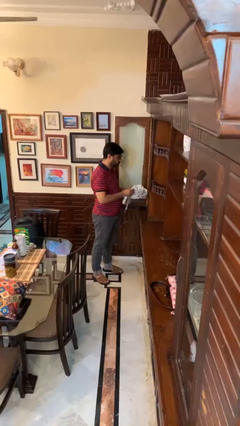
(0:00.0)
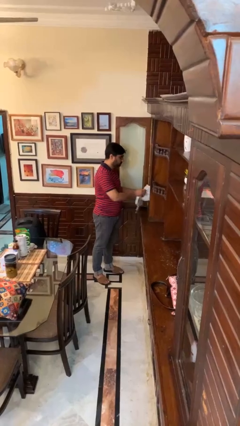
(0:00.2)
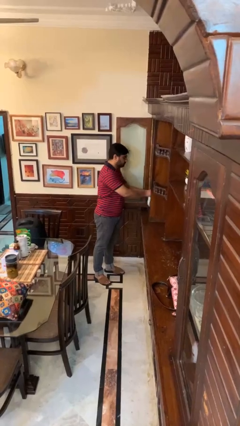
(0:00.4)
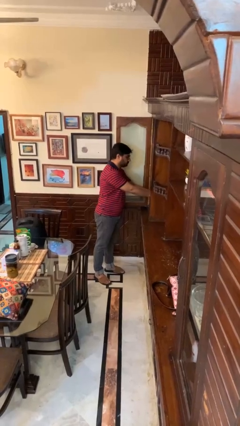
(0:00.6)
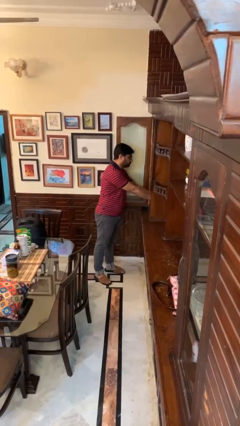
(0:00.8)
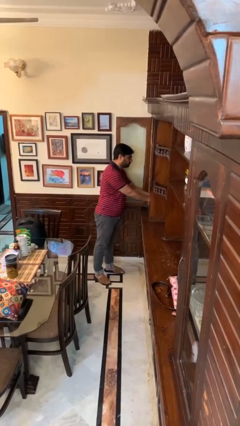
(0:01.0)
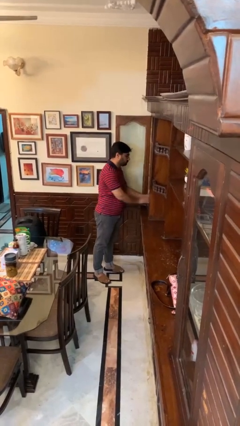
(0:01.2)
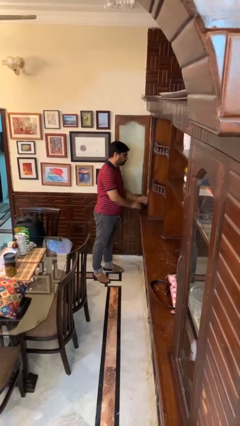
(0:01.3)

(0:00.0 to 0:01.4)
person puts clothes into dresser

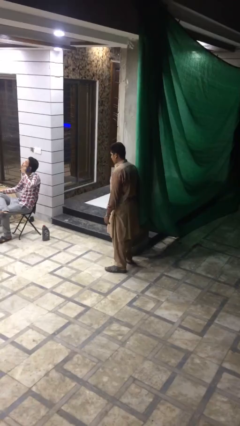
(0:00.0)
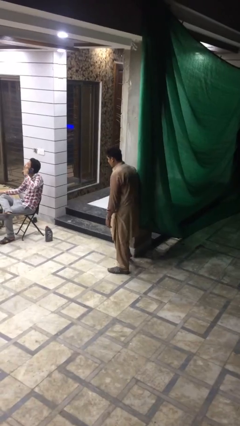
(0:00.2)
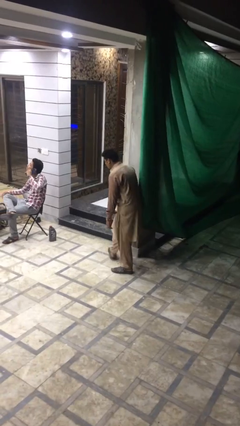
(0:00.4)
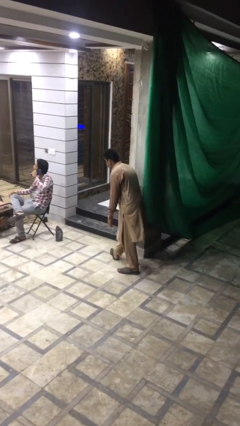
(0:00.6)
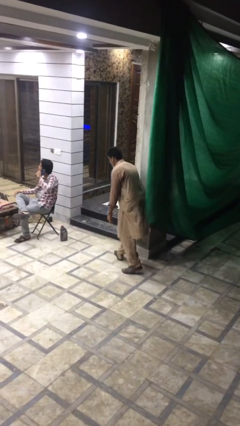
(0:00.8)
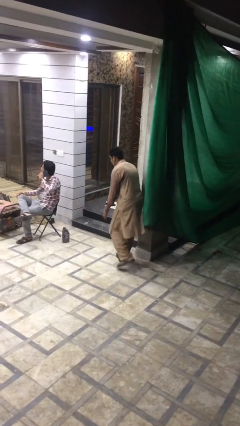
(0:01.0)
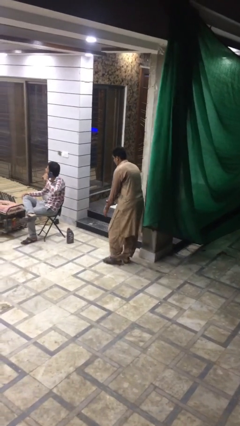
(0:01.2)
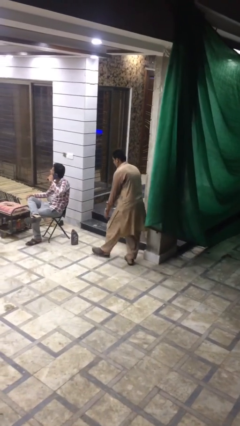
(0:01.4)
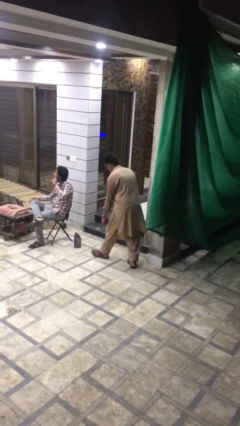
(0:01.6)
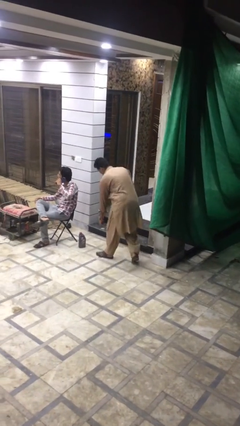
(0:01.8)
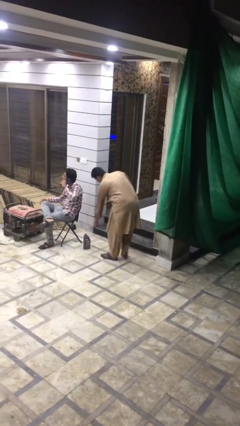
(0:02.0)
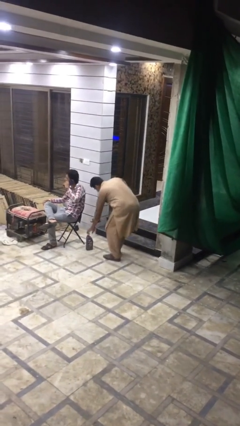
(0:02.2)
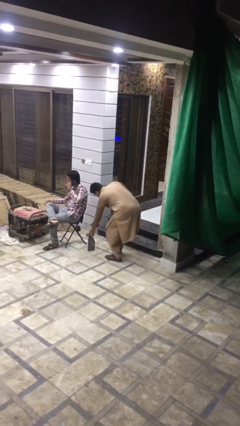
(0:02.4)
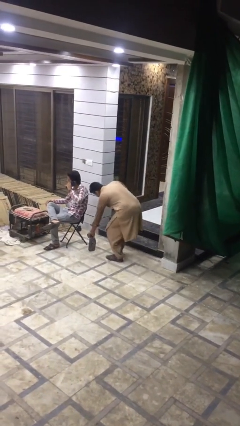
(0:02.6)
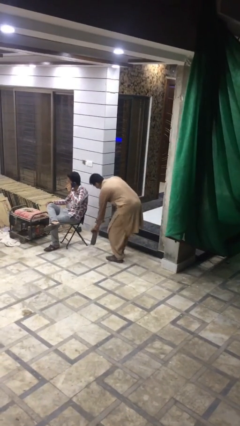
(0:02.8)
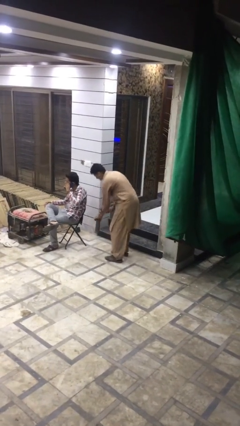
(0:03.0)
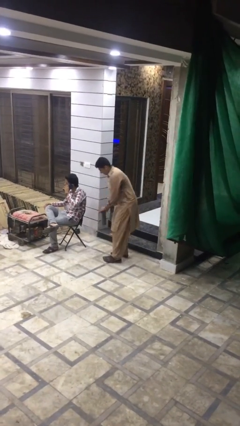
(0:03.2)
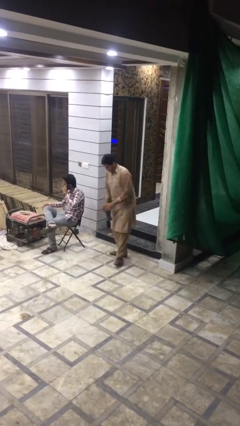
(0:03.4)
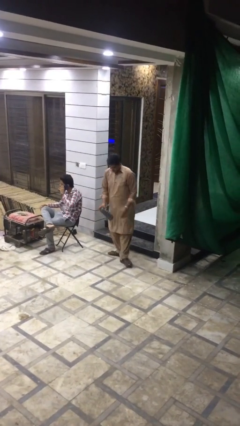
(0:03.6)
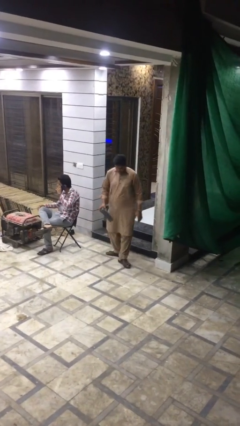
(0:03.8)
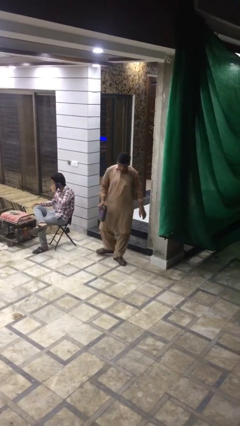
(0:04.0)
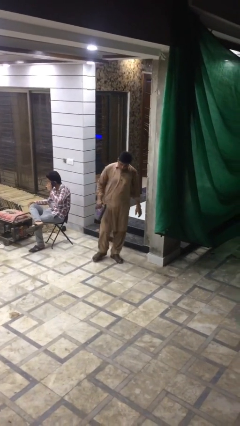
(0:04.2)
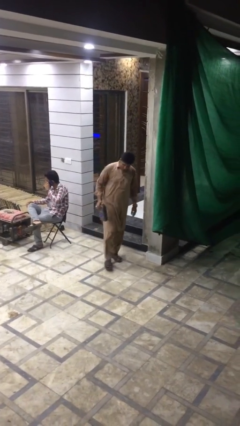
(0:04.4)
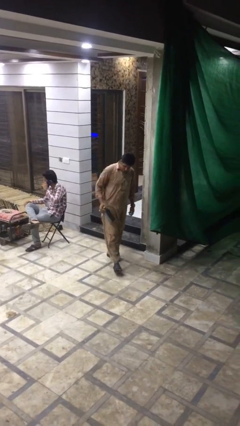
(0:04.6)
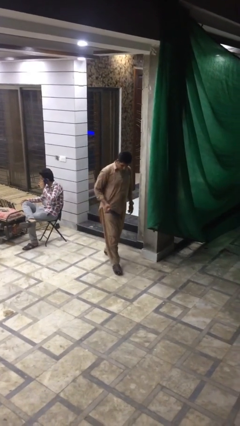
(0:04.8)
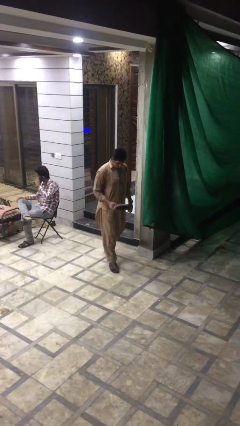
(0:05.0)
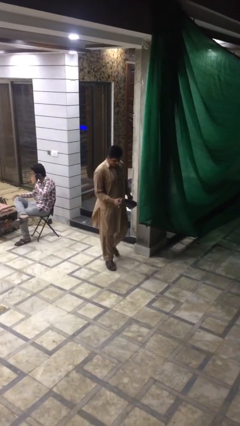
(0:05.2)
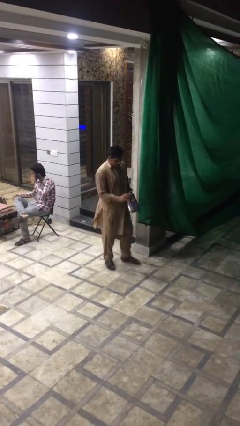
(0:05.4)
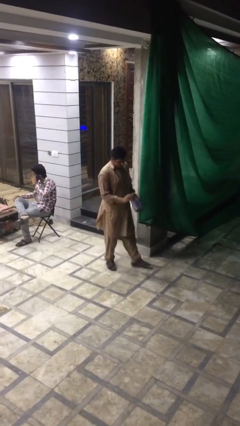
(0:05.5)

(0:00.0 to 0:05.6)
person steals object from person

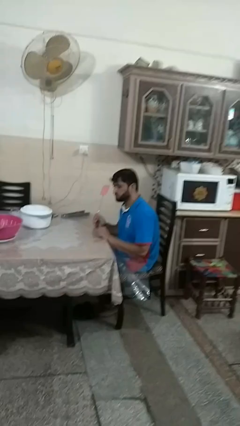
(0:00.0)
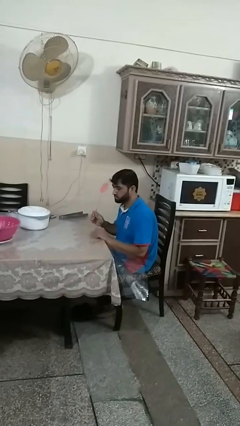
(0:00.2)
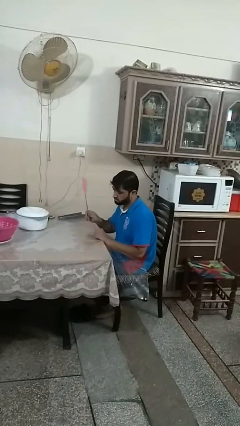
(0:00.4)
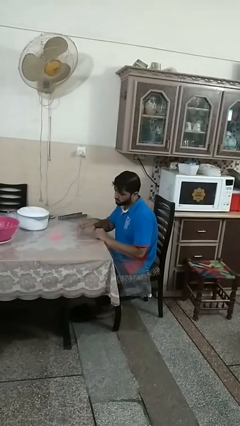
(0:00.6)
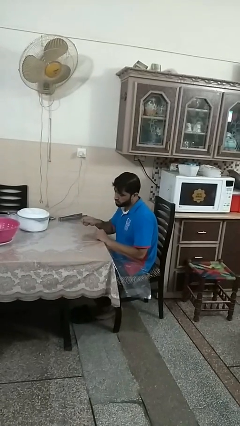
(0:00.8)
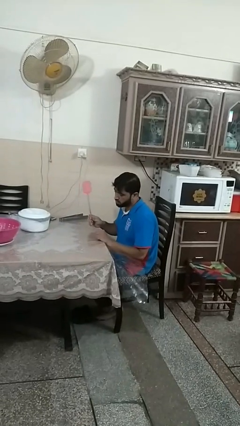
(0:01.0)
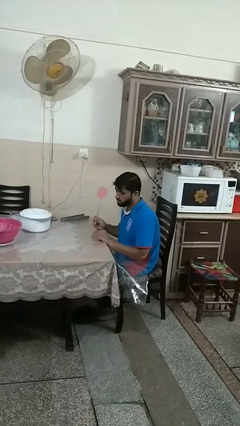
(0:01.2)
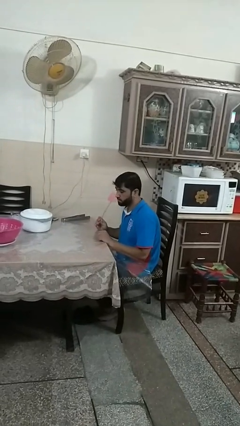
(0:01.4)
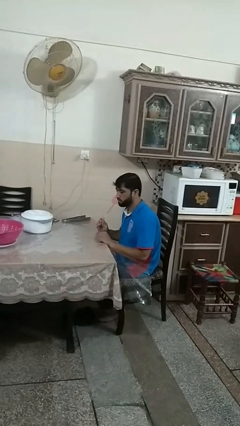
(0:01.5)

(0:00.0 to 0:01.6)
person swats bug

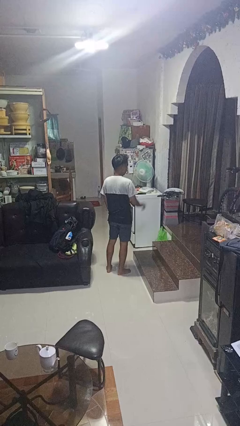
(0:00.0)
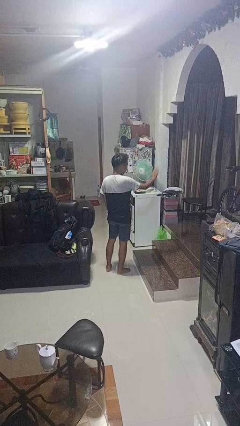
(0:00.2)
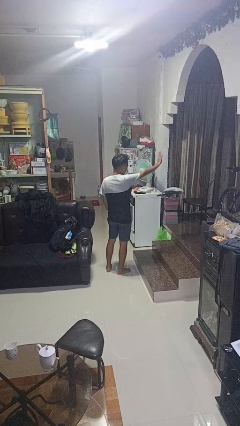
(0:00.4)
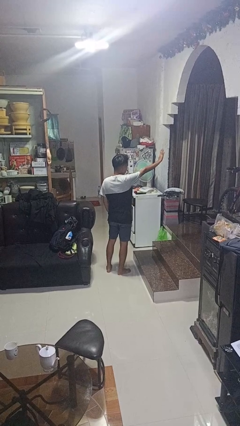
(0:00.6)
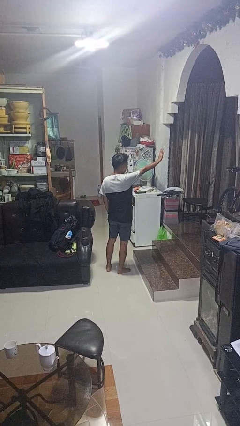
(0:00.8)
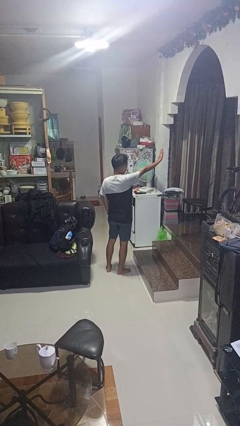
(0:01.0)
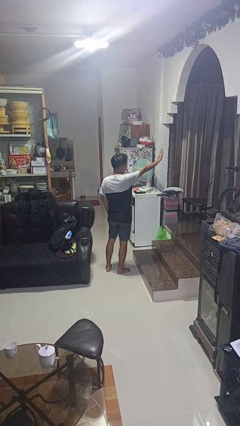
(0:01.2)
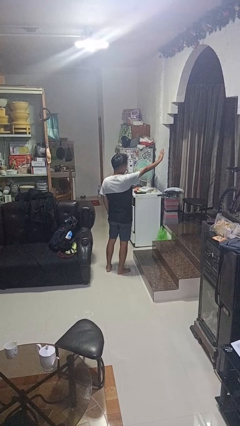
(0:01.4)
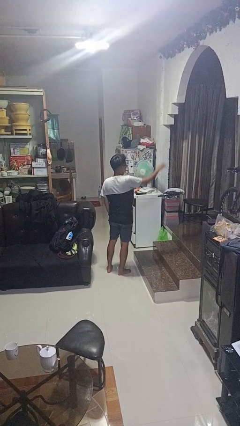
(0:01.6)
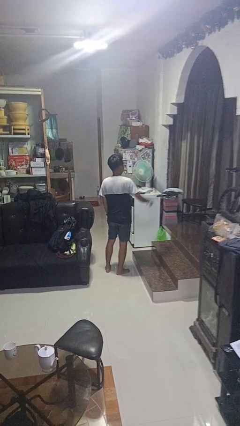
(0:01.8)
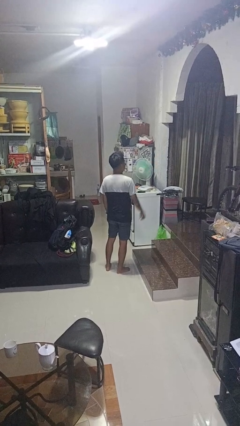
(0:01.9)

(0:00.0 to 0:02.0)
person gestures stop

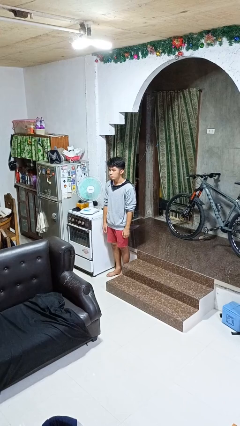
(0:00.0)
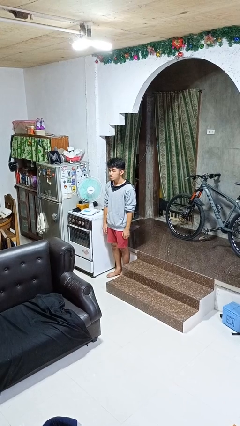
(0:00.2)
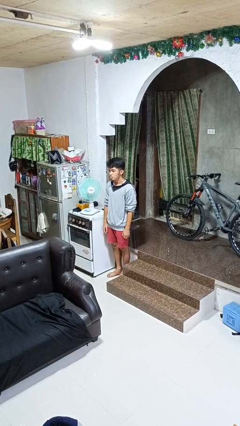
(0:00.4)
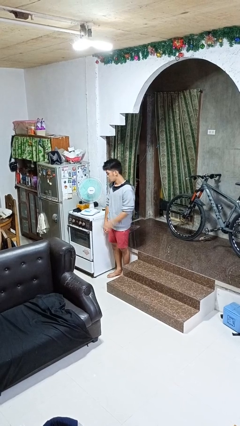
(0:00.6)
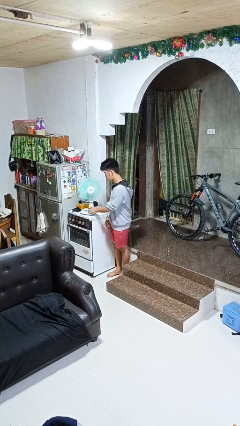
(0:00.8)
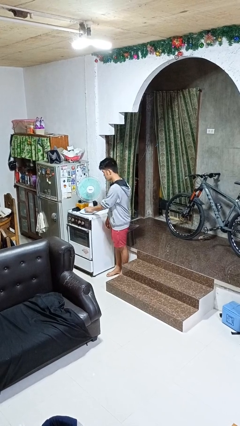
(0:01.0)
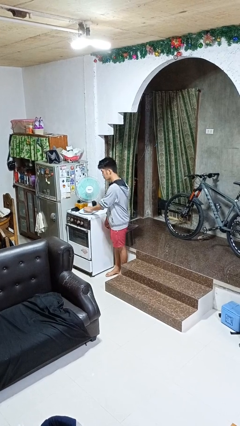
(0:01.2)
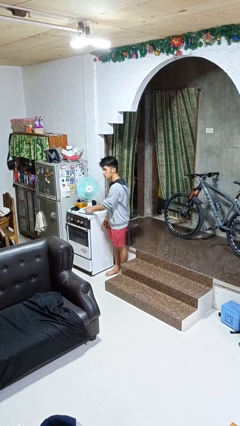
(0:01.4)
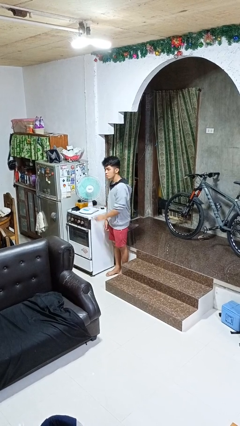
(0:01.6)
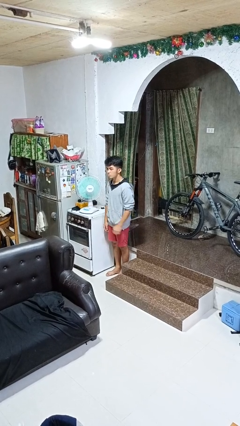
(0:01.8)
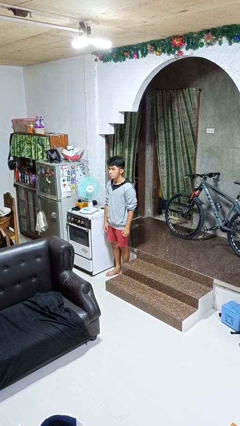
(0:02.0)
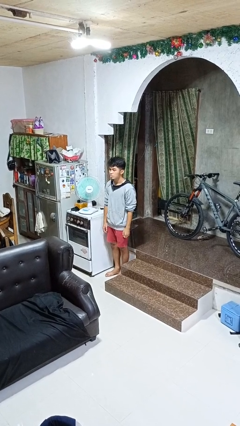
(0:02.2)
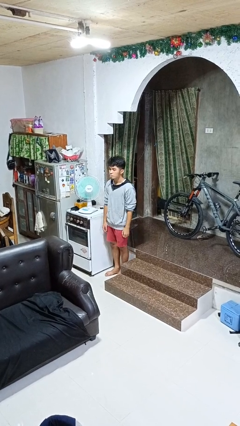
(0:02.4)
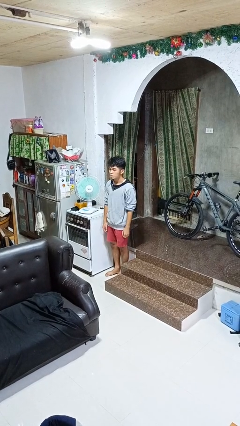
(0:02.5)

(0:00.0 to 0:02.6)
person turns on fan

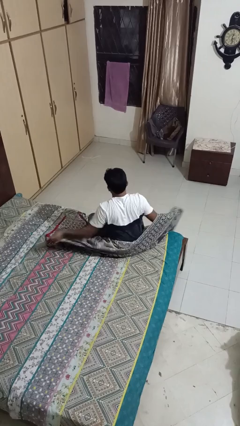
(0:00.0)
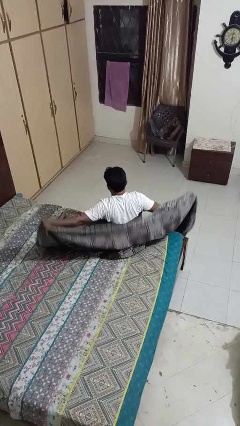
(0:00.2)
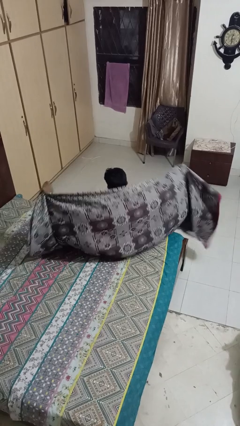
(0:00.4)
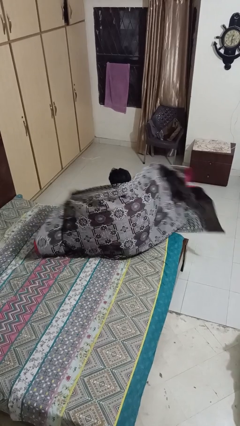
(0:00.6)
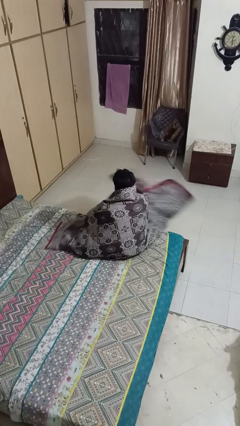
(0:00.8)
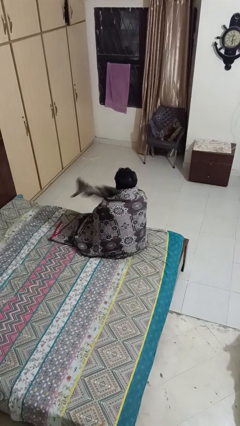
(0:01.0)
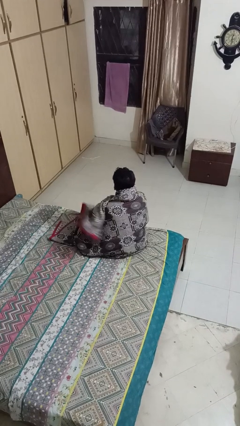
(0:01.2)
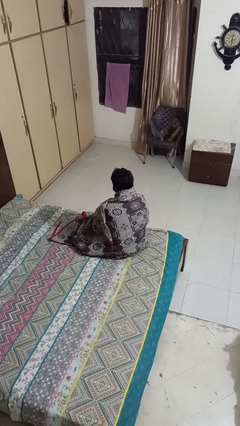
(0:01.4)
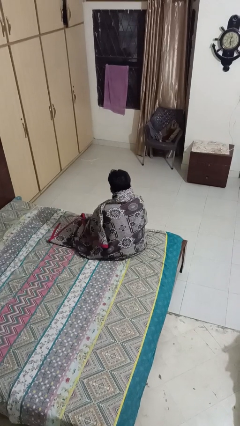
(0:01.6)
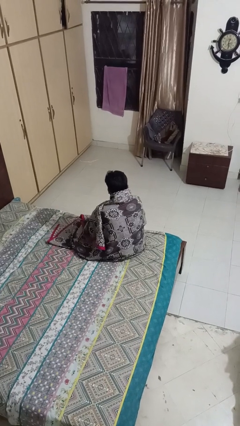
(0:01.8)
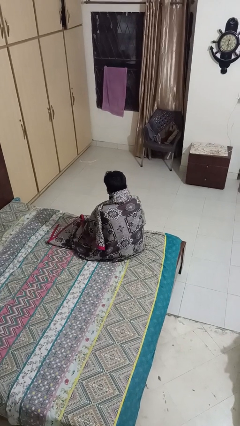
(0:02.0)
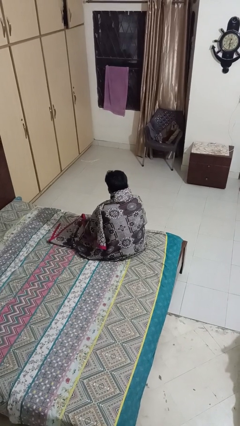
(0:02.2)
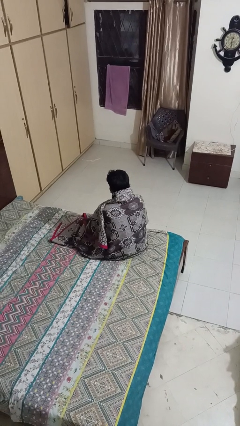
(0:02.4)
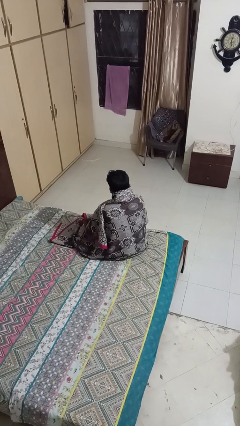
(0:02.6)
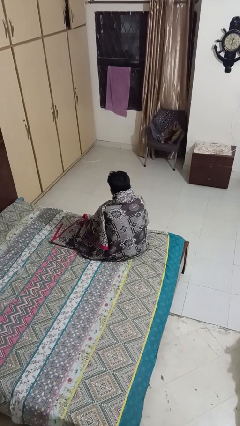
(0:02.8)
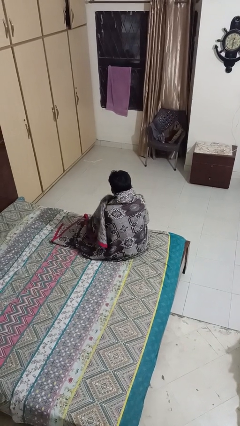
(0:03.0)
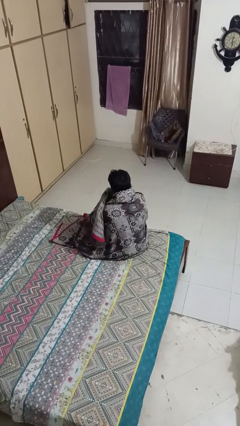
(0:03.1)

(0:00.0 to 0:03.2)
person covers with blanket

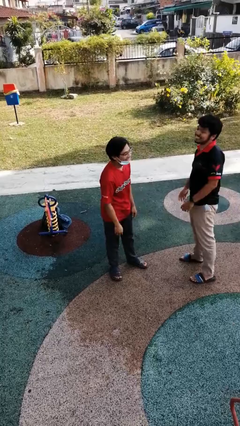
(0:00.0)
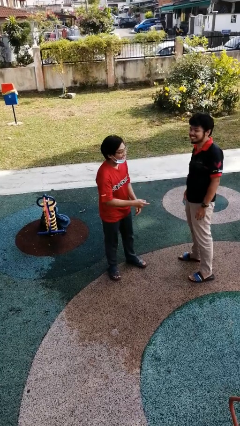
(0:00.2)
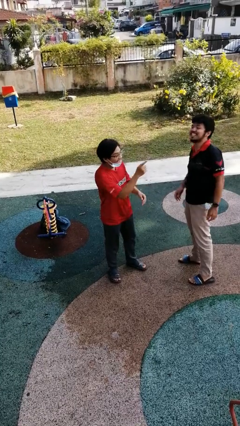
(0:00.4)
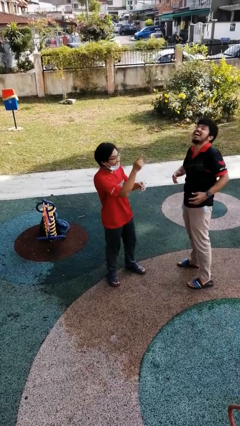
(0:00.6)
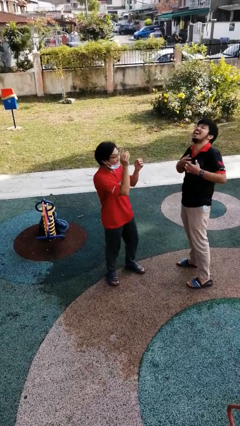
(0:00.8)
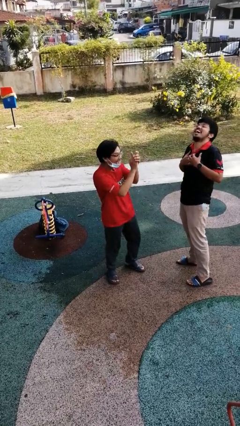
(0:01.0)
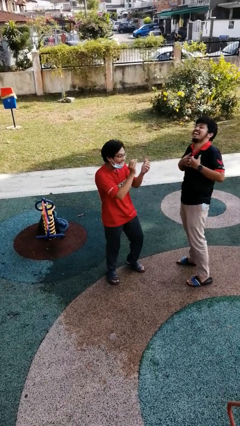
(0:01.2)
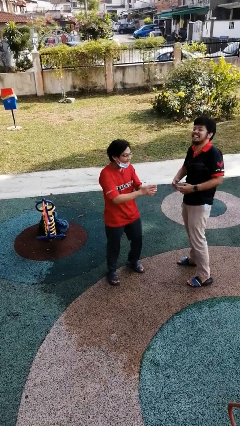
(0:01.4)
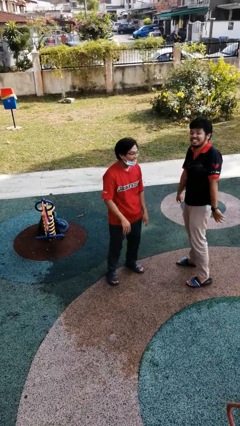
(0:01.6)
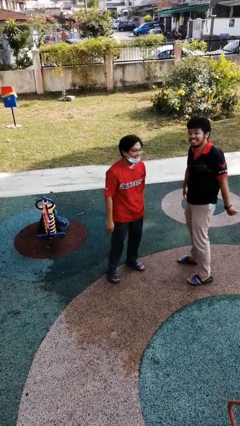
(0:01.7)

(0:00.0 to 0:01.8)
person laughs with person
